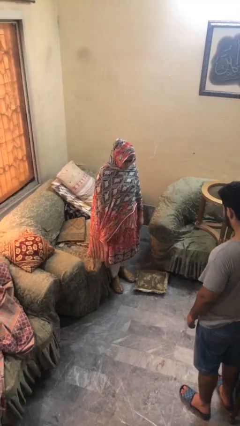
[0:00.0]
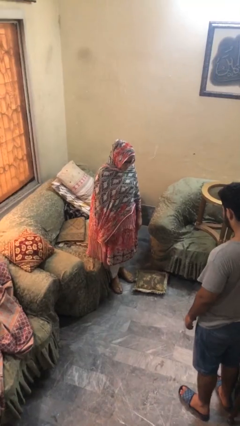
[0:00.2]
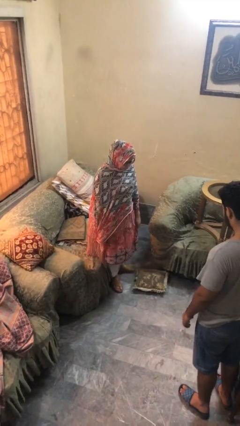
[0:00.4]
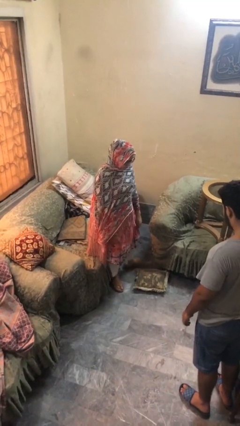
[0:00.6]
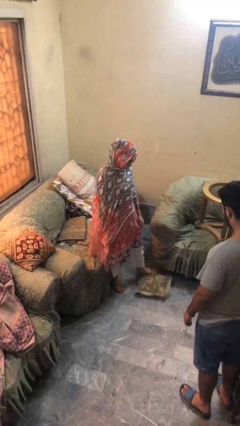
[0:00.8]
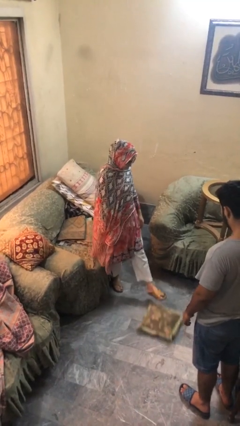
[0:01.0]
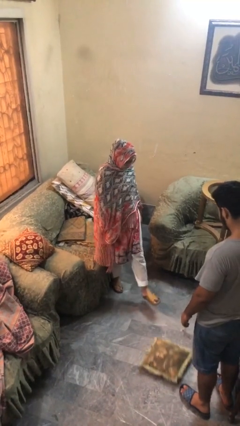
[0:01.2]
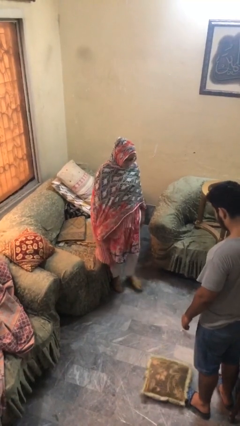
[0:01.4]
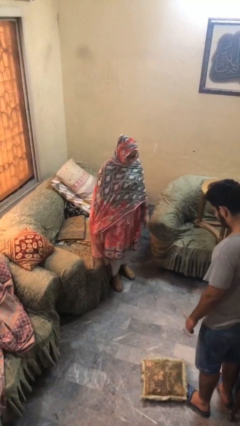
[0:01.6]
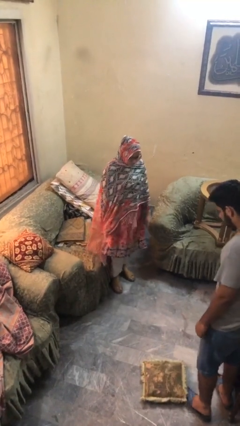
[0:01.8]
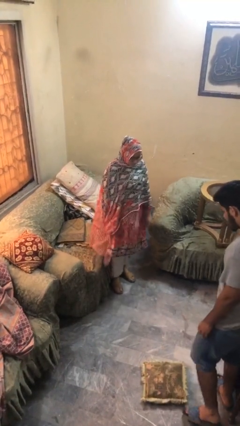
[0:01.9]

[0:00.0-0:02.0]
person kicks object to person

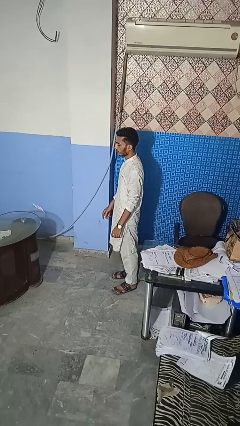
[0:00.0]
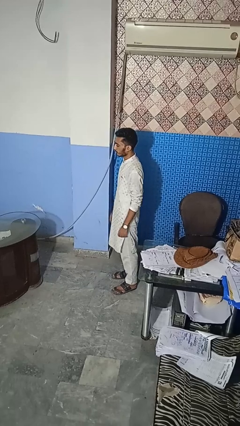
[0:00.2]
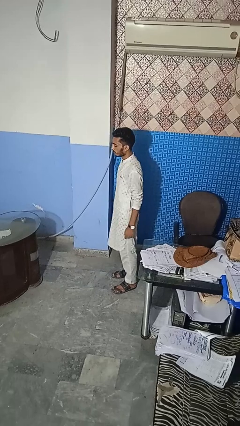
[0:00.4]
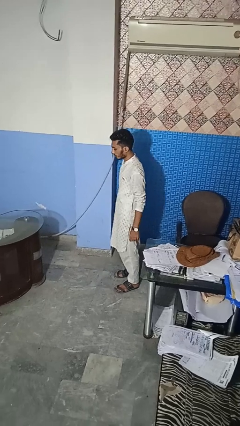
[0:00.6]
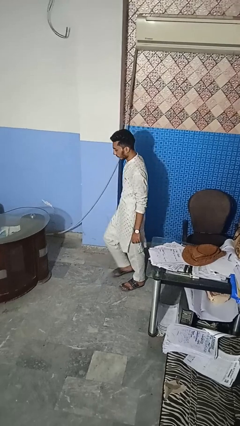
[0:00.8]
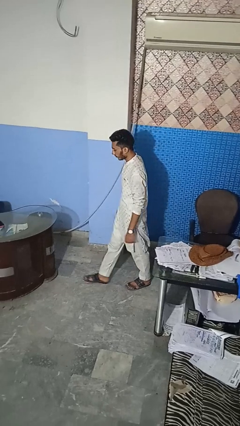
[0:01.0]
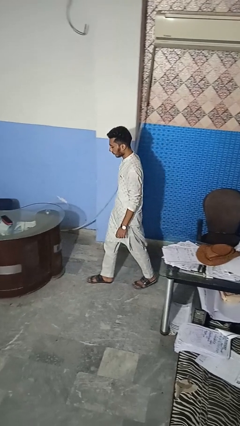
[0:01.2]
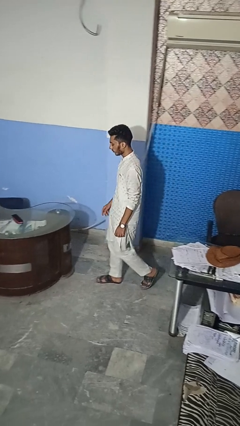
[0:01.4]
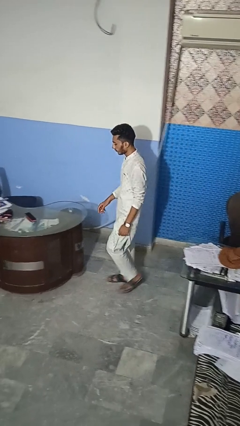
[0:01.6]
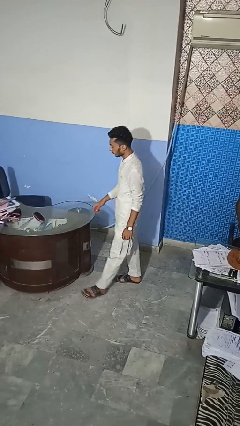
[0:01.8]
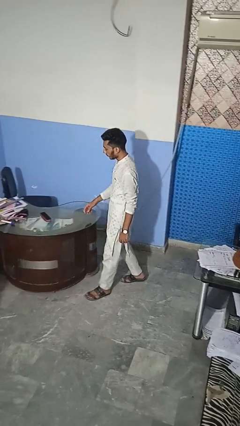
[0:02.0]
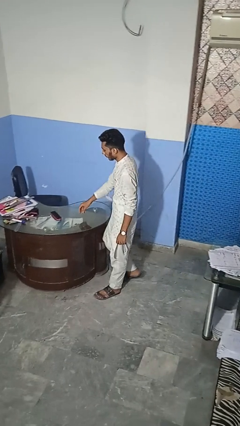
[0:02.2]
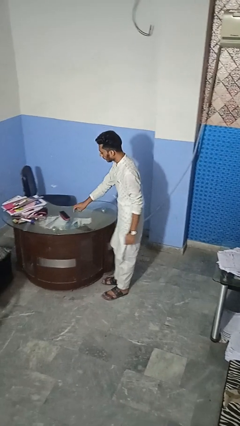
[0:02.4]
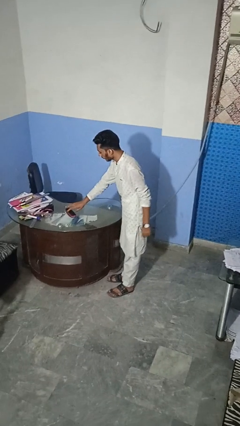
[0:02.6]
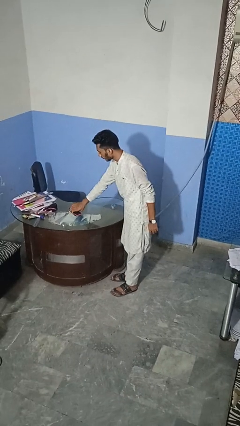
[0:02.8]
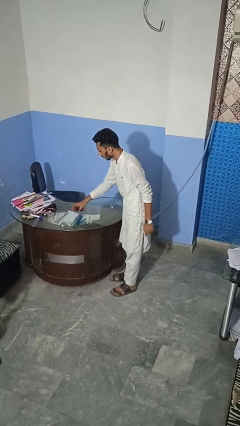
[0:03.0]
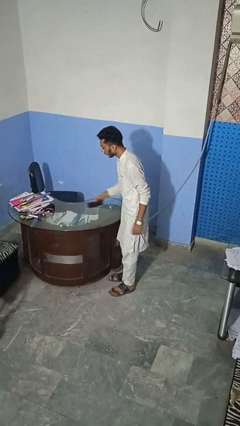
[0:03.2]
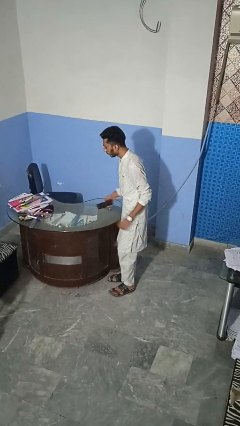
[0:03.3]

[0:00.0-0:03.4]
person picks up object from table

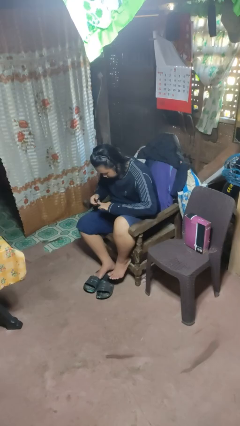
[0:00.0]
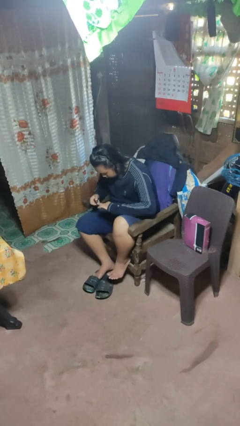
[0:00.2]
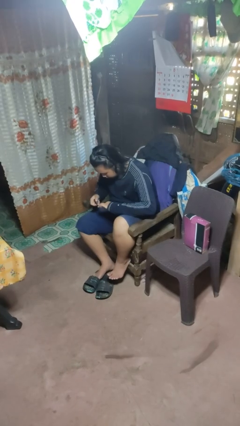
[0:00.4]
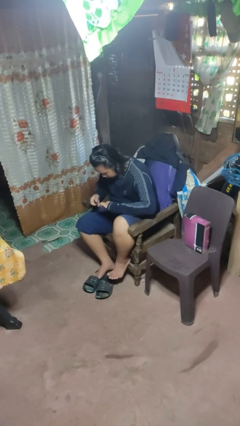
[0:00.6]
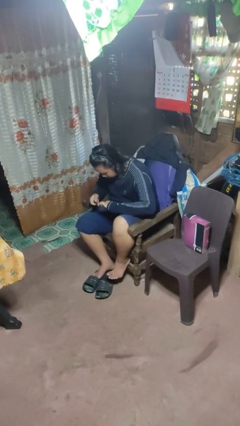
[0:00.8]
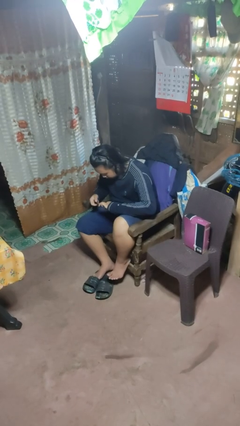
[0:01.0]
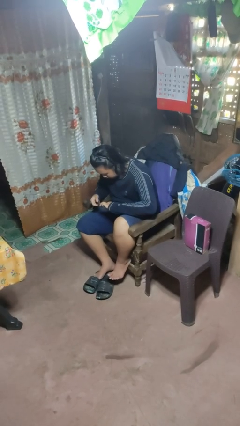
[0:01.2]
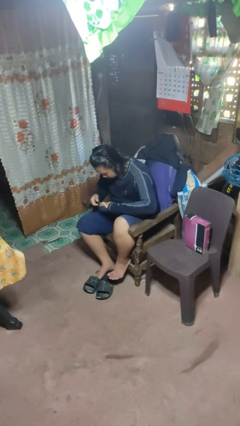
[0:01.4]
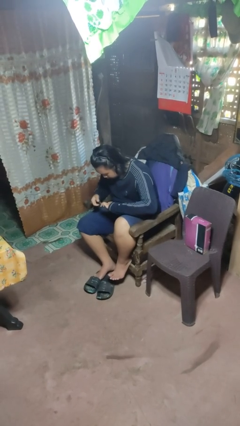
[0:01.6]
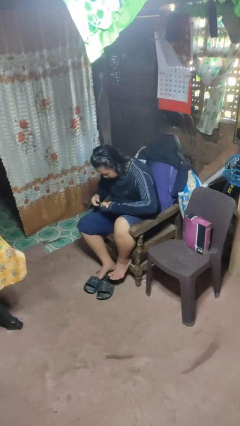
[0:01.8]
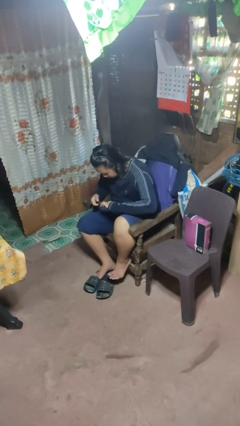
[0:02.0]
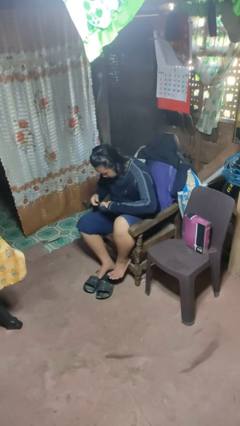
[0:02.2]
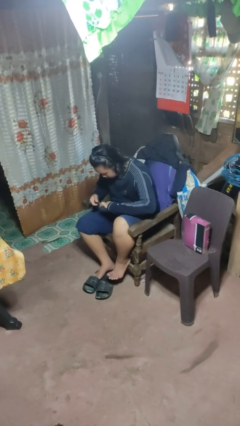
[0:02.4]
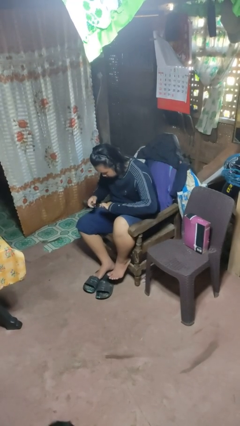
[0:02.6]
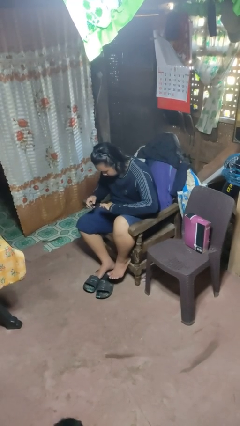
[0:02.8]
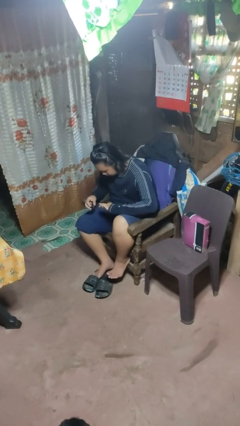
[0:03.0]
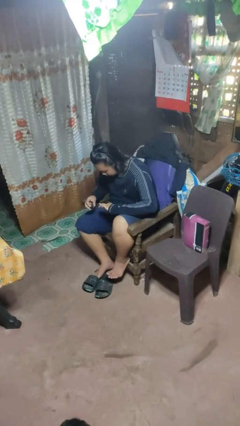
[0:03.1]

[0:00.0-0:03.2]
person clips fingernails

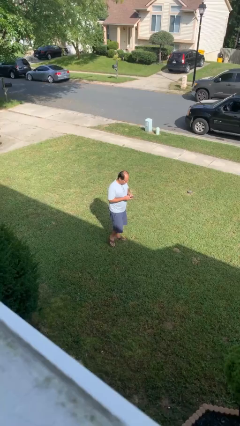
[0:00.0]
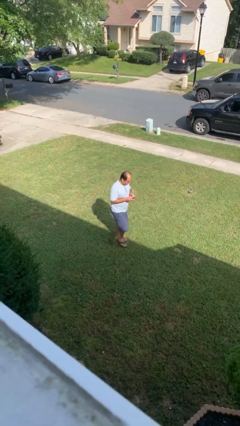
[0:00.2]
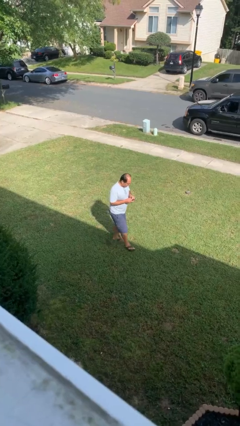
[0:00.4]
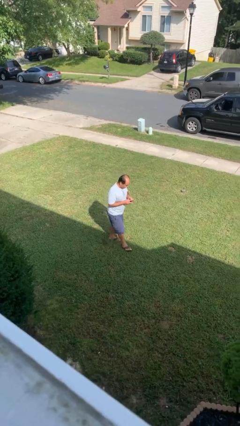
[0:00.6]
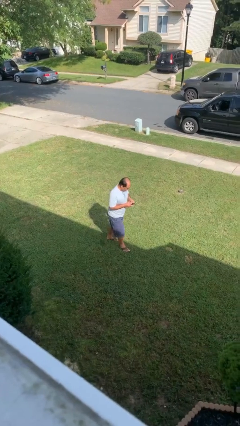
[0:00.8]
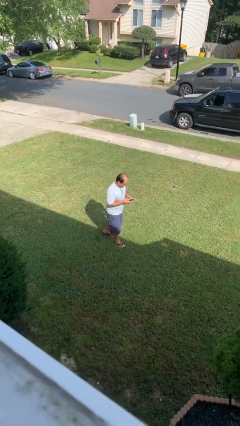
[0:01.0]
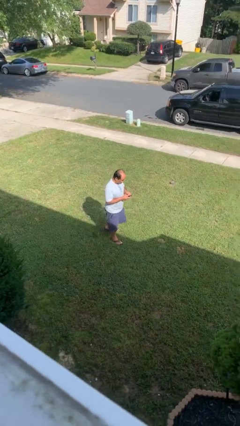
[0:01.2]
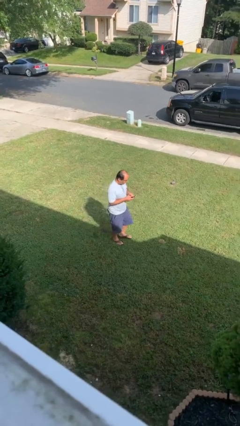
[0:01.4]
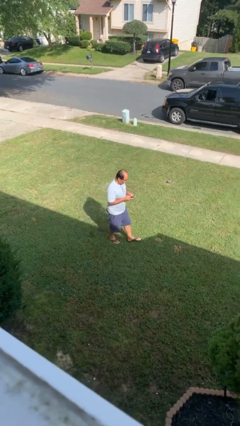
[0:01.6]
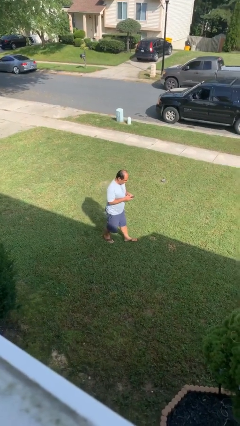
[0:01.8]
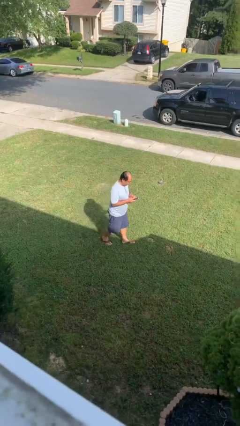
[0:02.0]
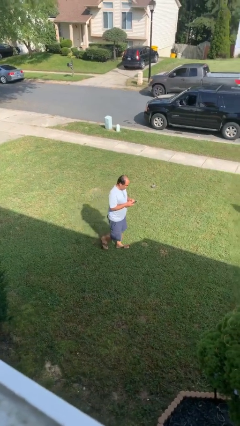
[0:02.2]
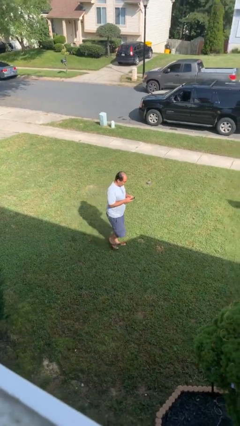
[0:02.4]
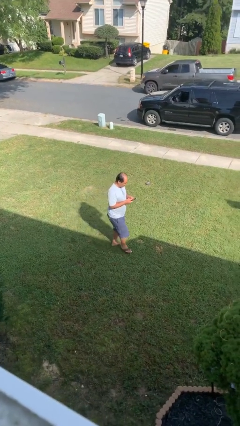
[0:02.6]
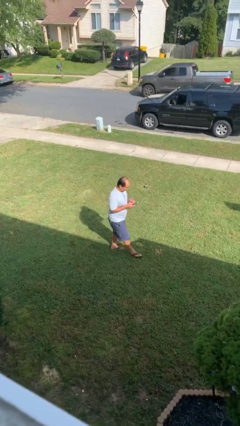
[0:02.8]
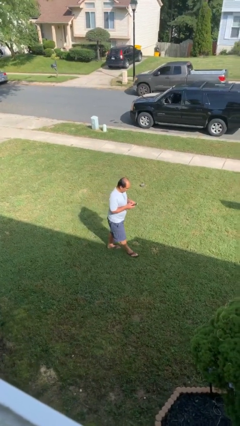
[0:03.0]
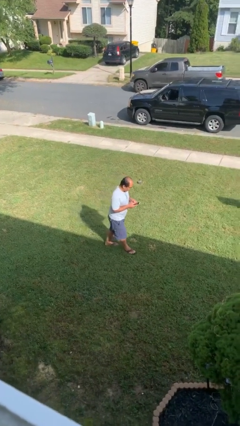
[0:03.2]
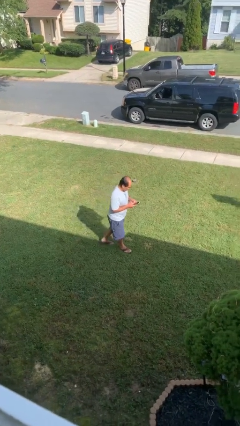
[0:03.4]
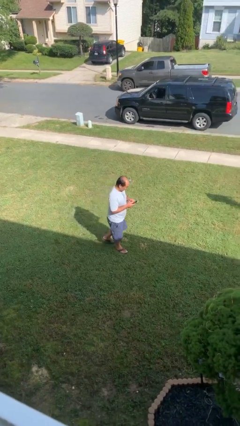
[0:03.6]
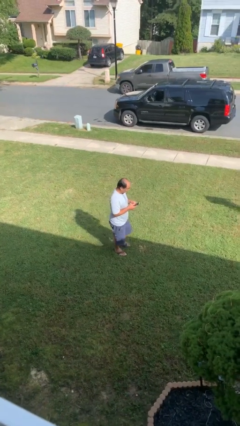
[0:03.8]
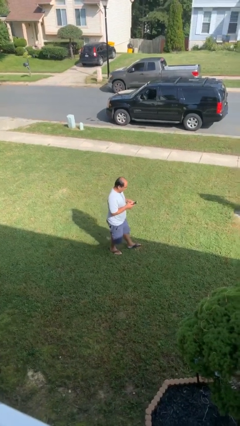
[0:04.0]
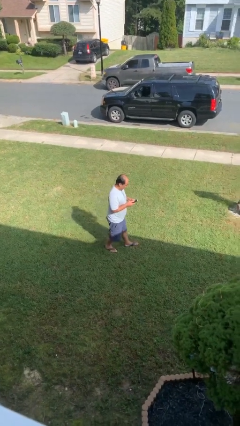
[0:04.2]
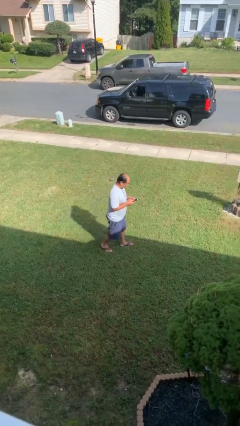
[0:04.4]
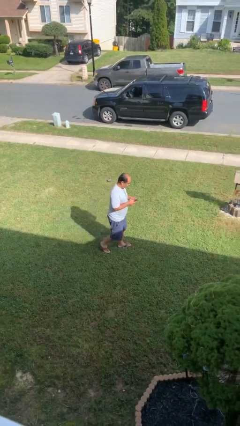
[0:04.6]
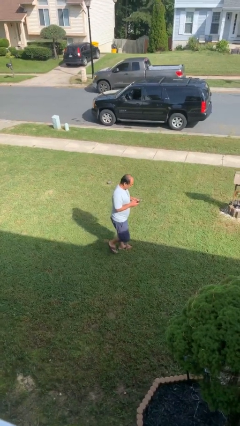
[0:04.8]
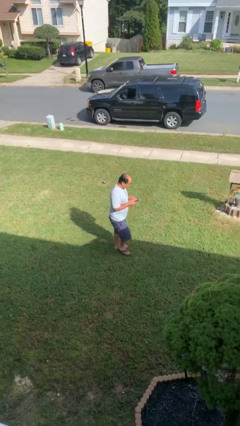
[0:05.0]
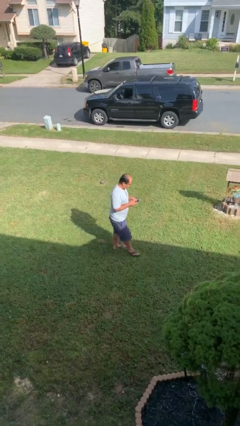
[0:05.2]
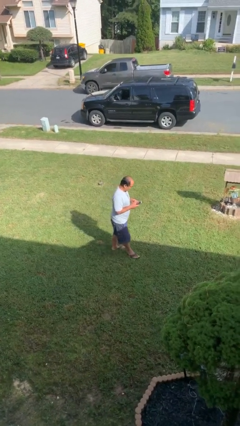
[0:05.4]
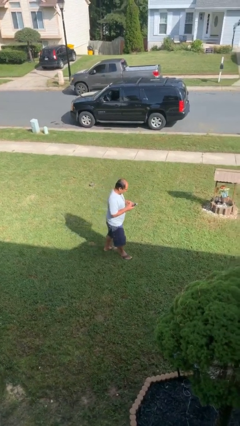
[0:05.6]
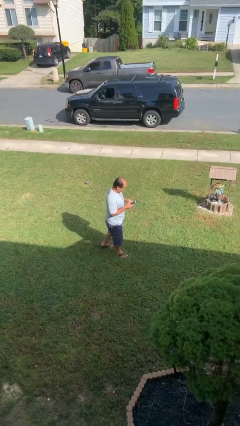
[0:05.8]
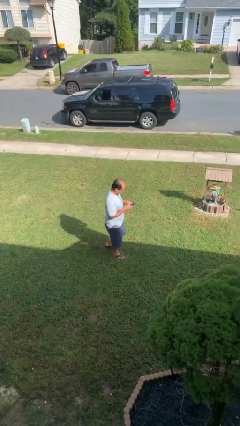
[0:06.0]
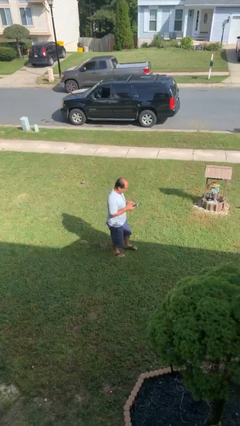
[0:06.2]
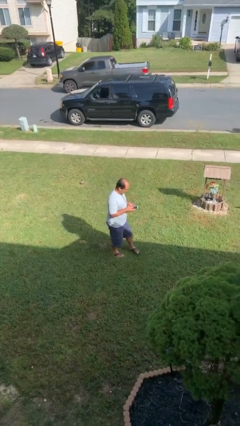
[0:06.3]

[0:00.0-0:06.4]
person texts on phone

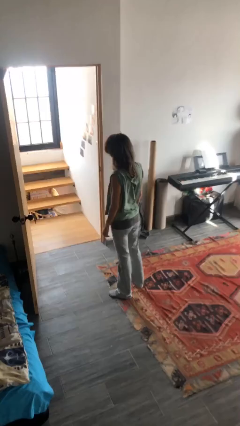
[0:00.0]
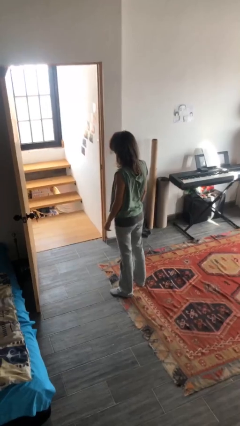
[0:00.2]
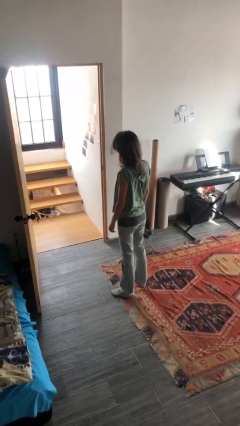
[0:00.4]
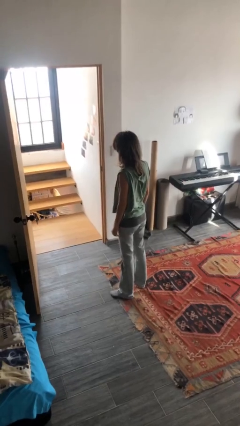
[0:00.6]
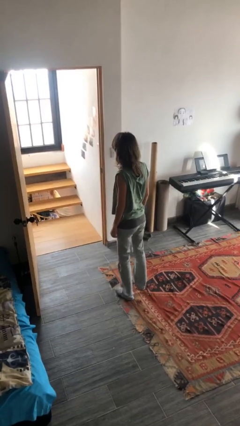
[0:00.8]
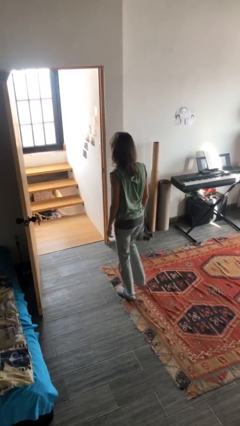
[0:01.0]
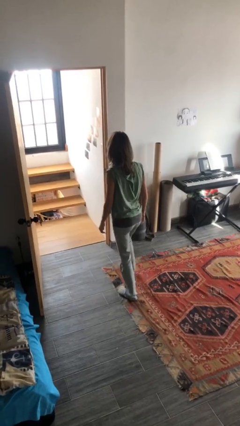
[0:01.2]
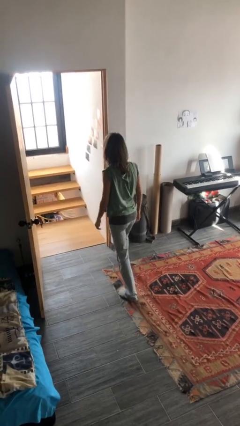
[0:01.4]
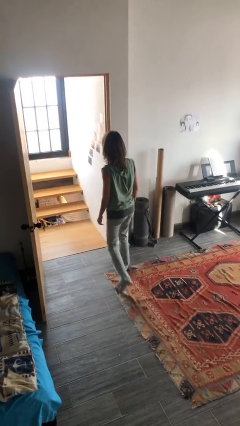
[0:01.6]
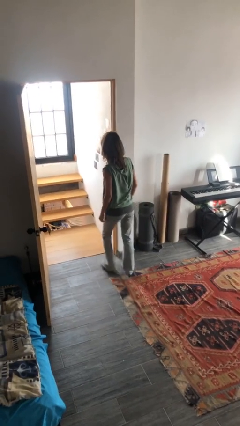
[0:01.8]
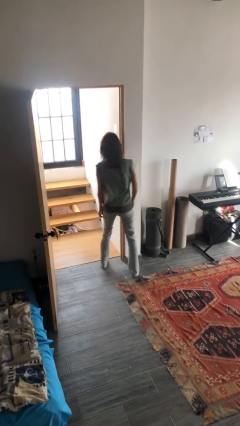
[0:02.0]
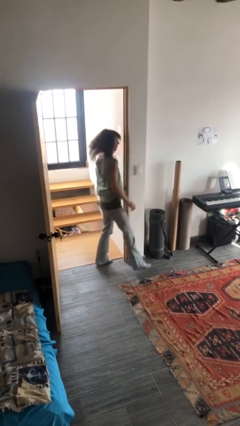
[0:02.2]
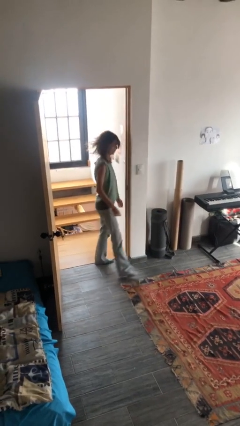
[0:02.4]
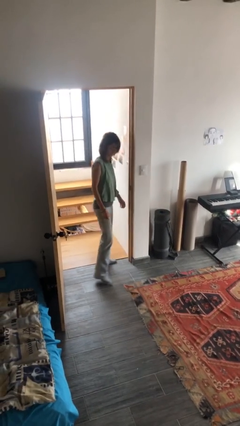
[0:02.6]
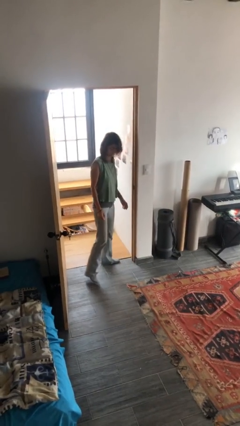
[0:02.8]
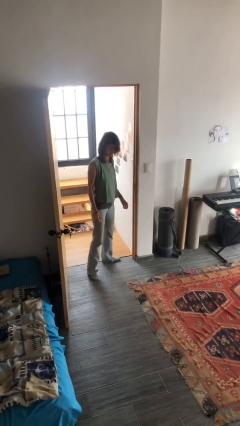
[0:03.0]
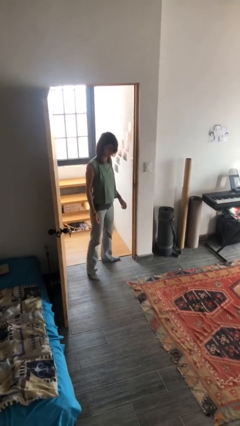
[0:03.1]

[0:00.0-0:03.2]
person bumps into wall
